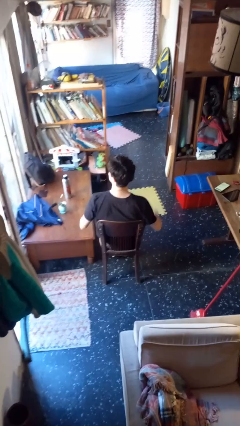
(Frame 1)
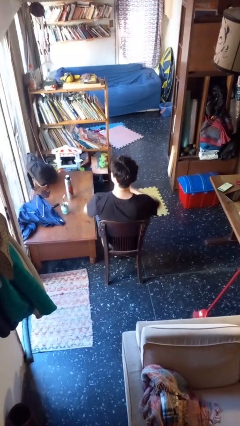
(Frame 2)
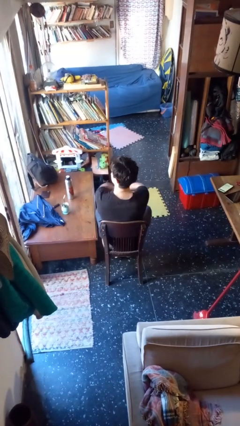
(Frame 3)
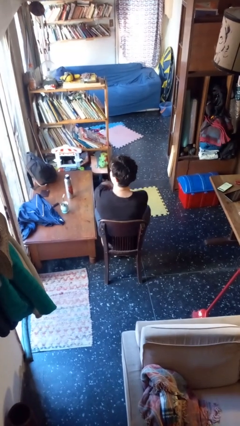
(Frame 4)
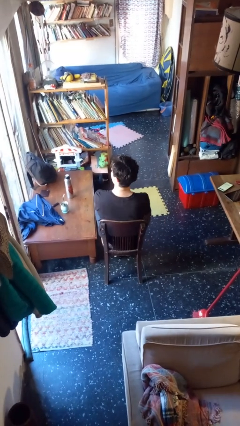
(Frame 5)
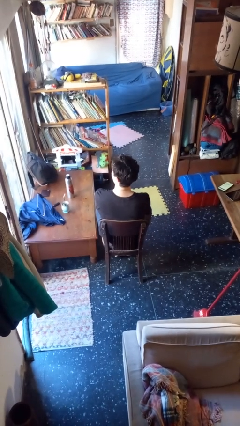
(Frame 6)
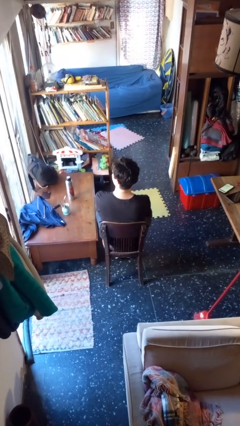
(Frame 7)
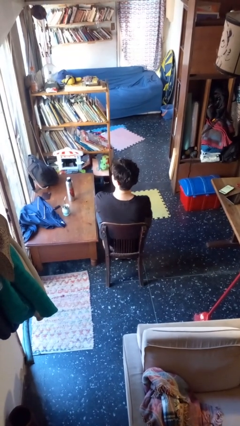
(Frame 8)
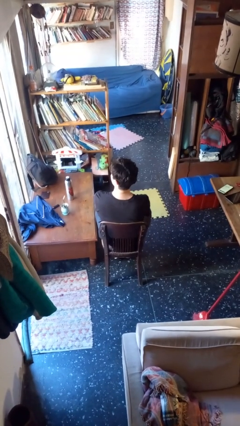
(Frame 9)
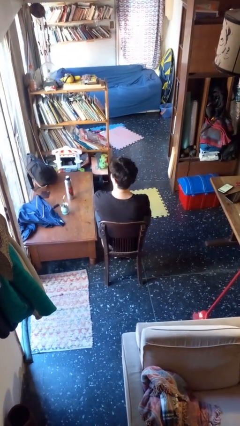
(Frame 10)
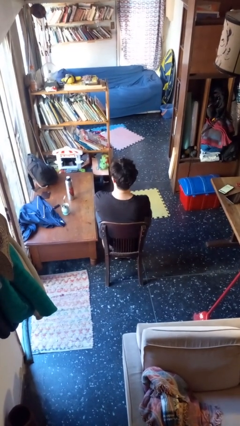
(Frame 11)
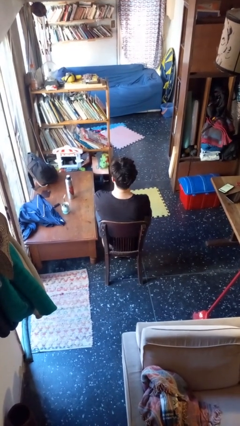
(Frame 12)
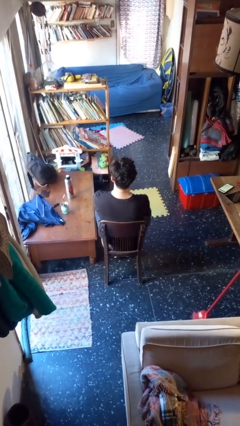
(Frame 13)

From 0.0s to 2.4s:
person crosses arms

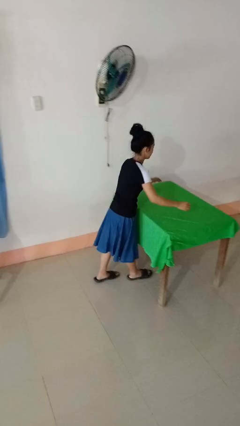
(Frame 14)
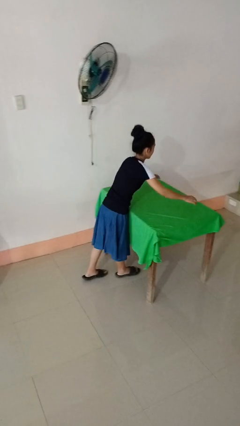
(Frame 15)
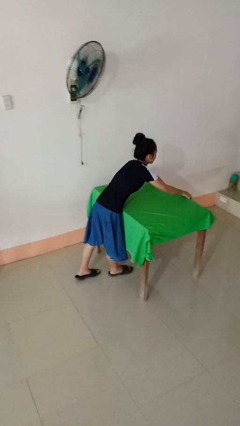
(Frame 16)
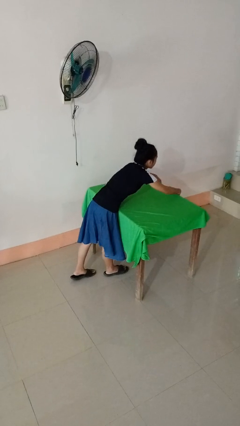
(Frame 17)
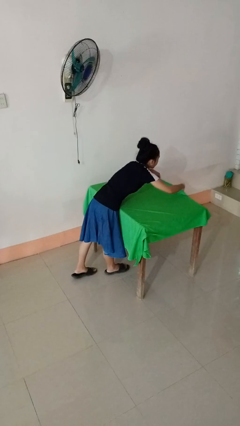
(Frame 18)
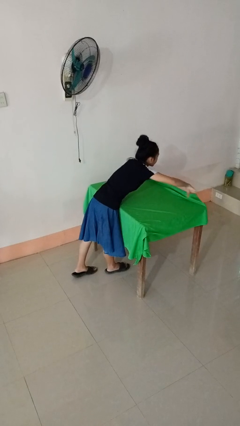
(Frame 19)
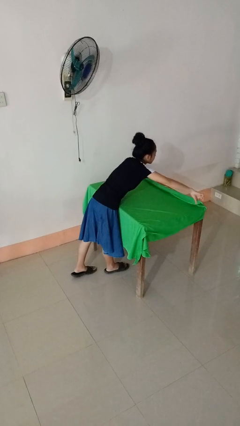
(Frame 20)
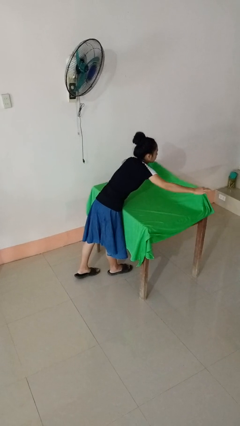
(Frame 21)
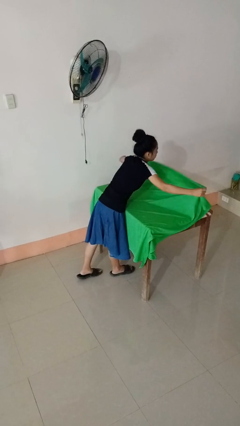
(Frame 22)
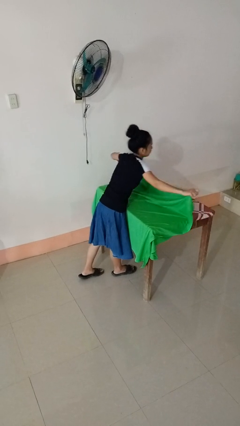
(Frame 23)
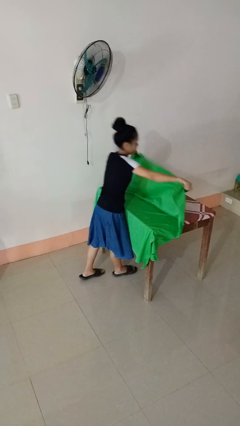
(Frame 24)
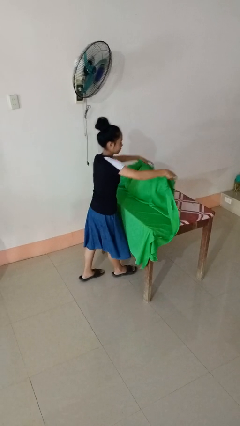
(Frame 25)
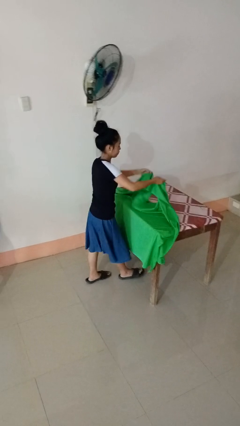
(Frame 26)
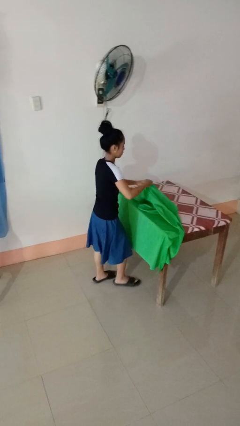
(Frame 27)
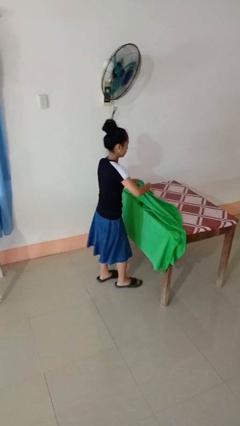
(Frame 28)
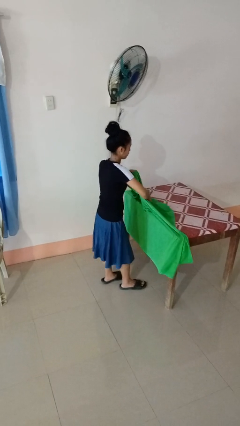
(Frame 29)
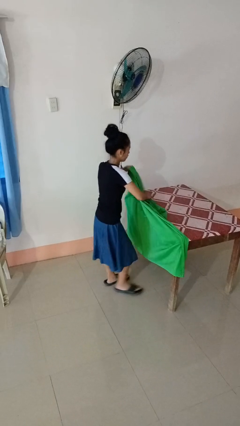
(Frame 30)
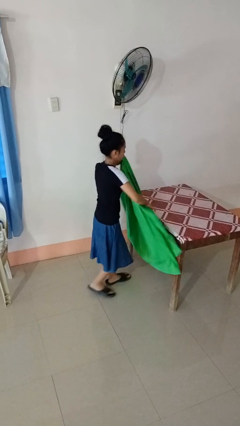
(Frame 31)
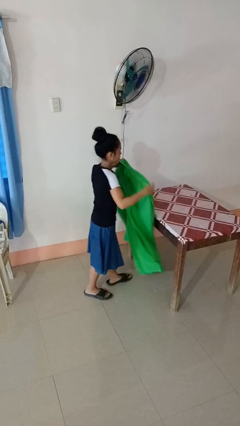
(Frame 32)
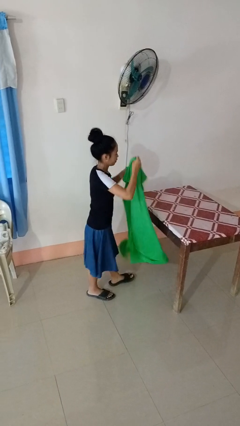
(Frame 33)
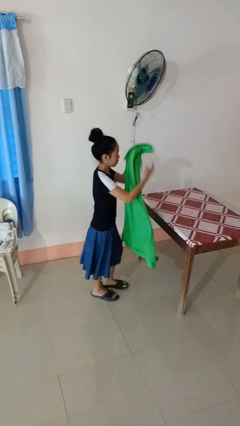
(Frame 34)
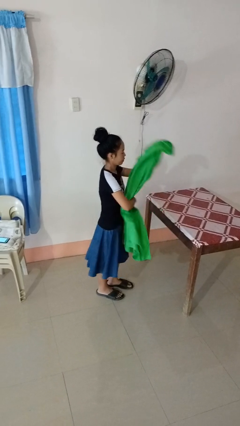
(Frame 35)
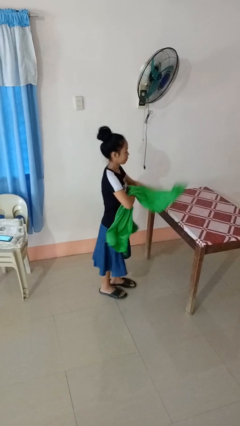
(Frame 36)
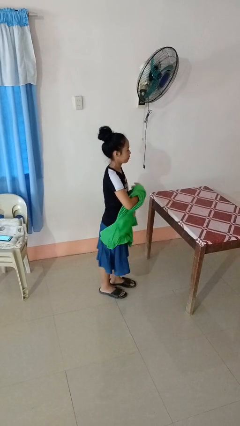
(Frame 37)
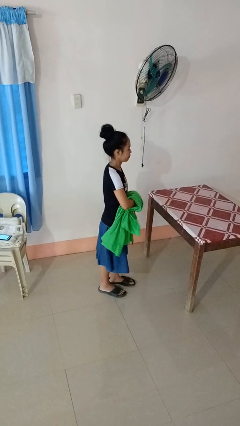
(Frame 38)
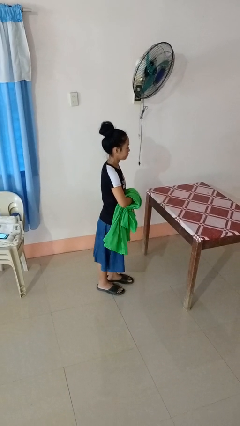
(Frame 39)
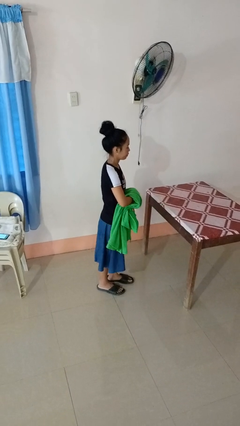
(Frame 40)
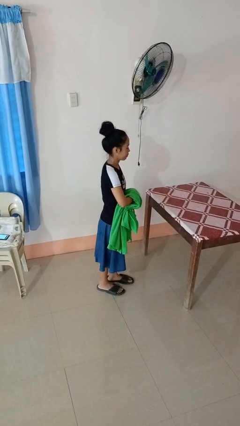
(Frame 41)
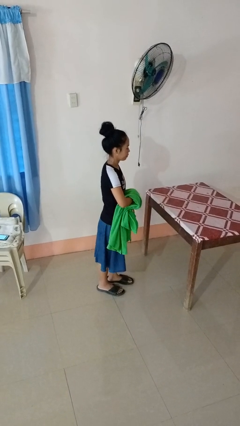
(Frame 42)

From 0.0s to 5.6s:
person folds tablecloth

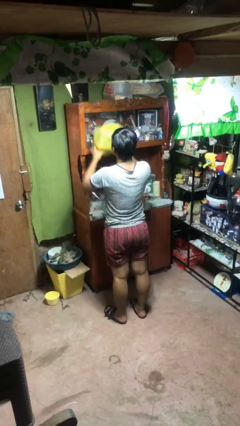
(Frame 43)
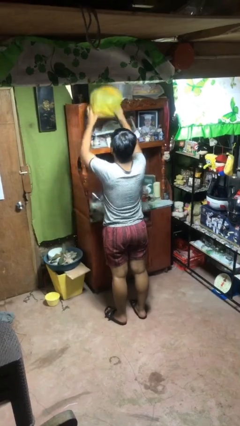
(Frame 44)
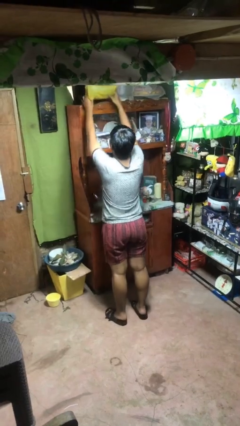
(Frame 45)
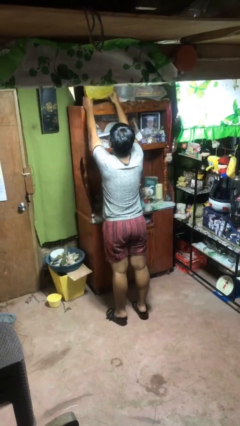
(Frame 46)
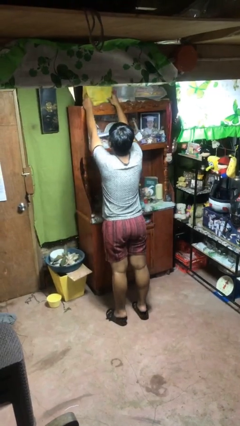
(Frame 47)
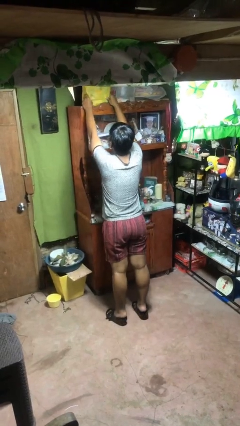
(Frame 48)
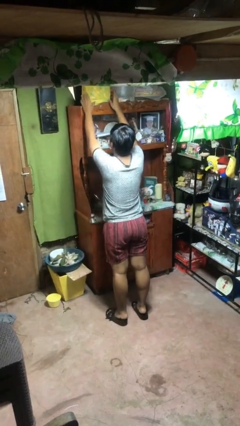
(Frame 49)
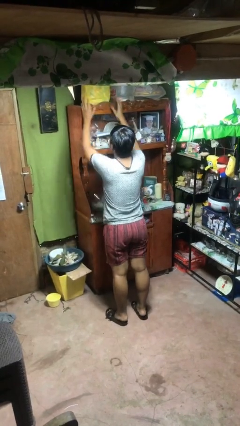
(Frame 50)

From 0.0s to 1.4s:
person puts down object on shelf

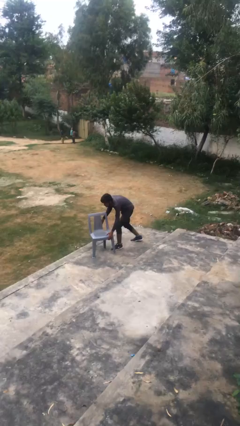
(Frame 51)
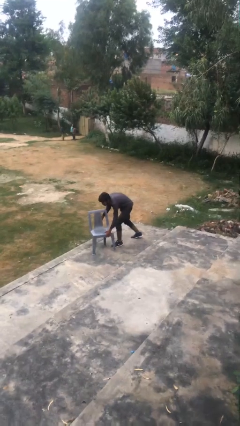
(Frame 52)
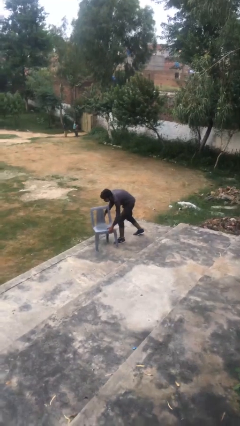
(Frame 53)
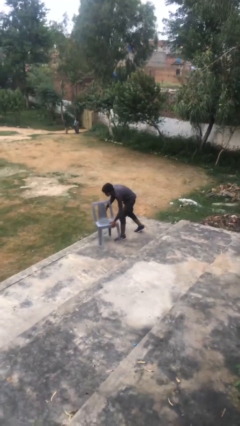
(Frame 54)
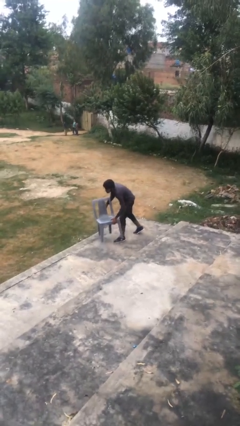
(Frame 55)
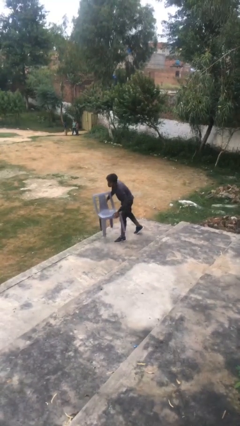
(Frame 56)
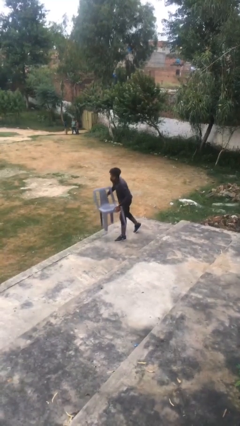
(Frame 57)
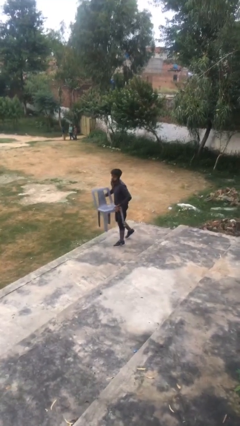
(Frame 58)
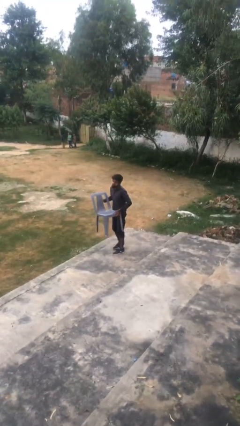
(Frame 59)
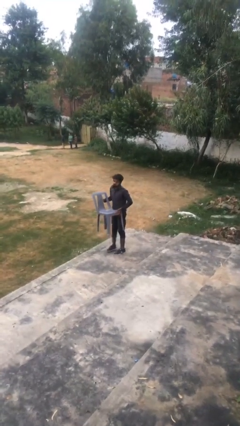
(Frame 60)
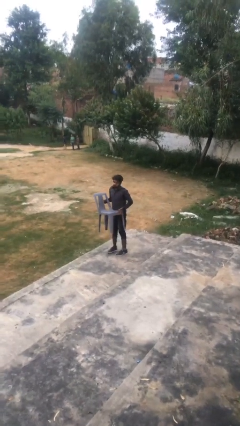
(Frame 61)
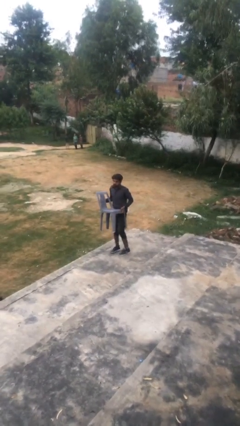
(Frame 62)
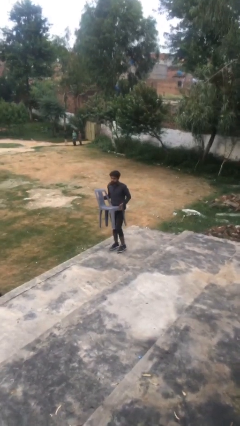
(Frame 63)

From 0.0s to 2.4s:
person picks up object from floor

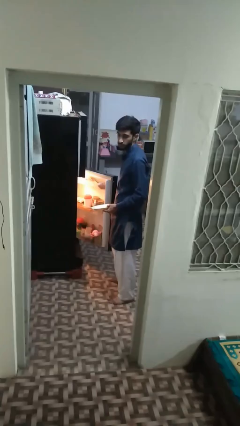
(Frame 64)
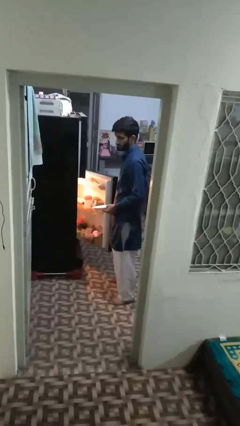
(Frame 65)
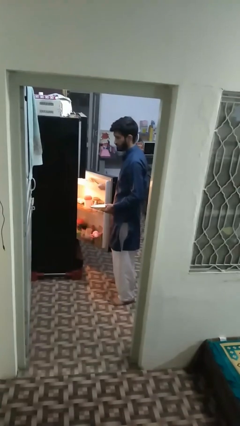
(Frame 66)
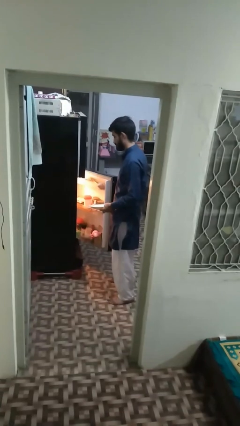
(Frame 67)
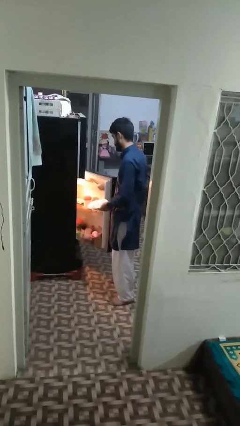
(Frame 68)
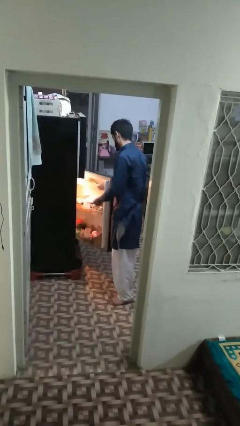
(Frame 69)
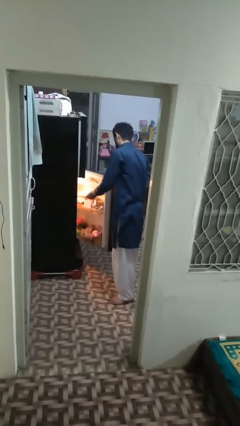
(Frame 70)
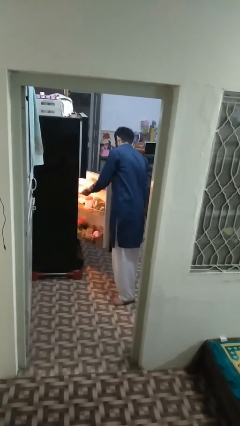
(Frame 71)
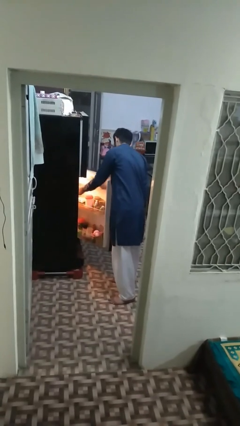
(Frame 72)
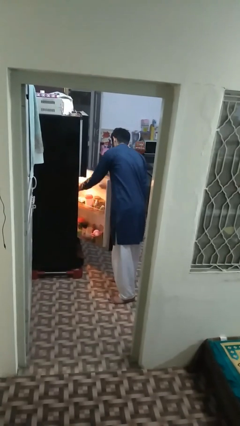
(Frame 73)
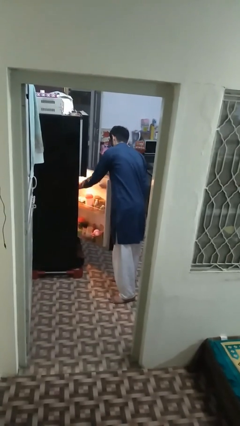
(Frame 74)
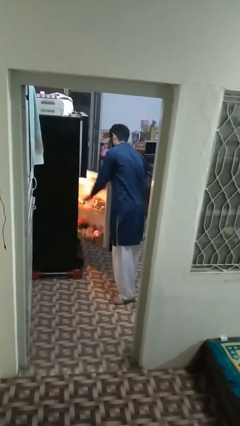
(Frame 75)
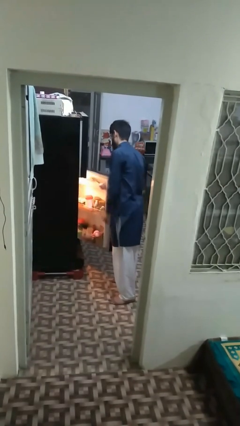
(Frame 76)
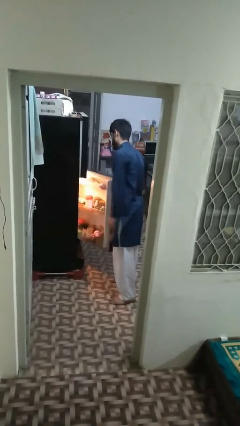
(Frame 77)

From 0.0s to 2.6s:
person puts object into refrigerator

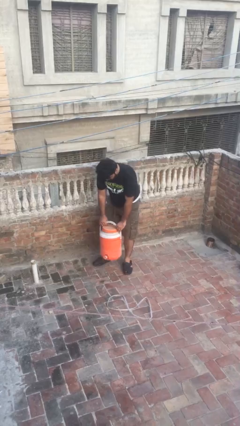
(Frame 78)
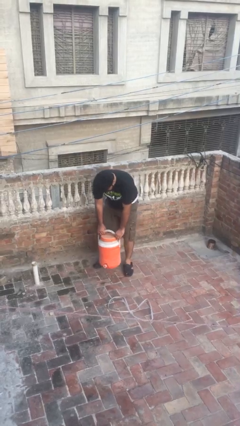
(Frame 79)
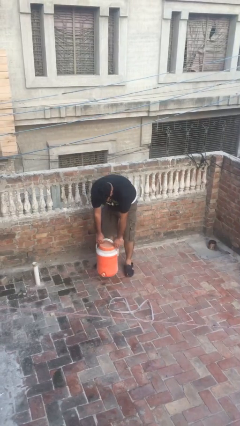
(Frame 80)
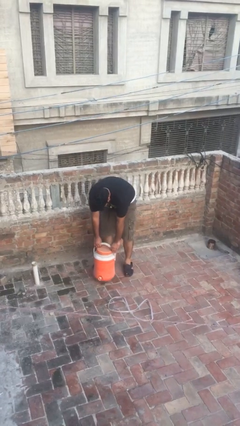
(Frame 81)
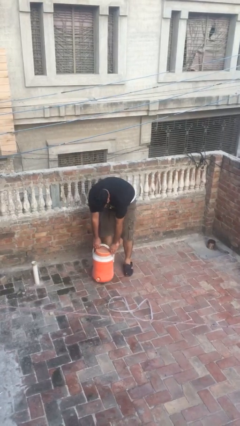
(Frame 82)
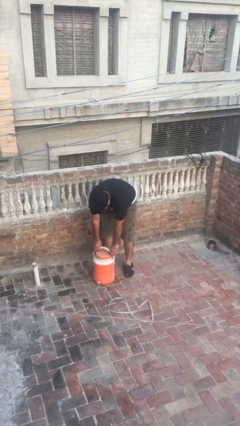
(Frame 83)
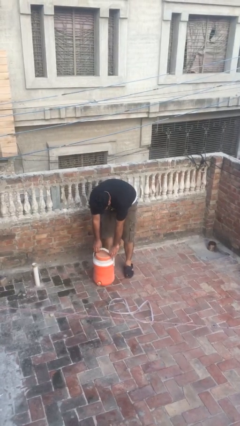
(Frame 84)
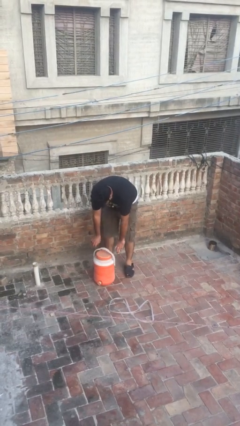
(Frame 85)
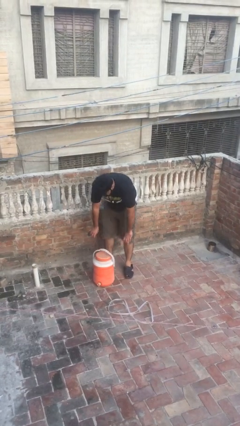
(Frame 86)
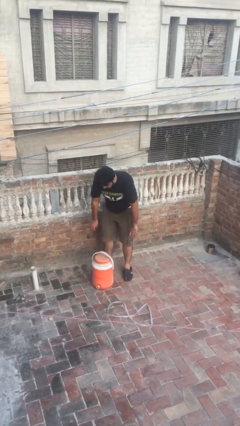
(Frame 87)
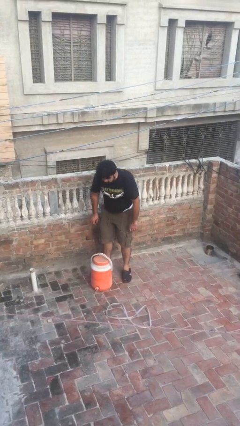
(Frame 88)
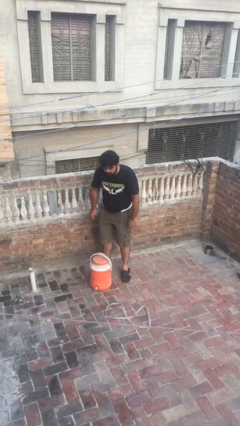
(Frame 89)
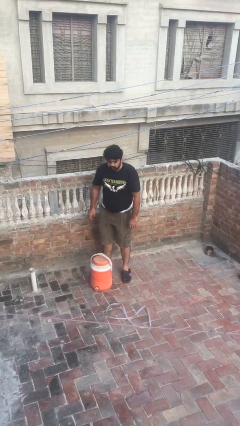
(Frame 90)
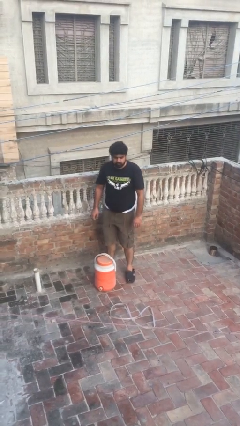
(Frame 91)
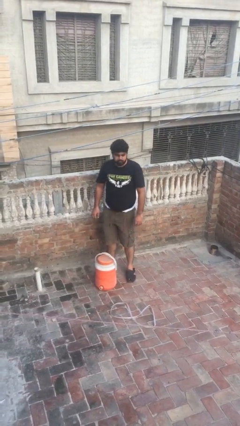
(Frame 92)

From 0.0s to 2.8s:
person puts down object on floor
